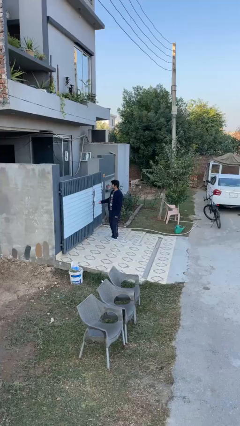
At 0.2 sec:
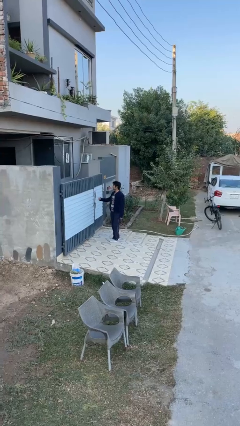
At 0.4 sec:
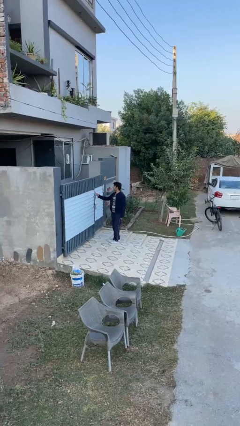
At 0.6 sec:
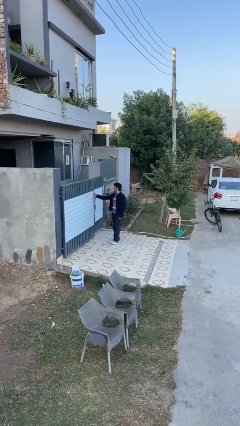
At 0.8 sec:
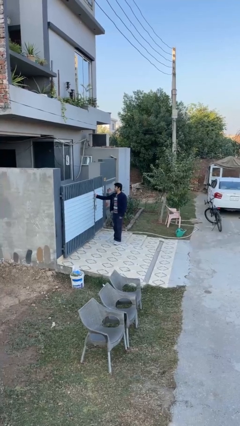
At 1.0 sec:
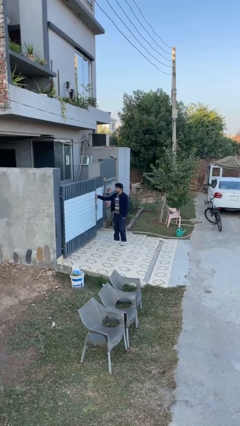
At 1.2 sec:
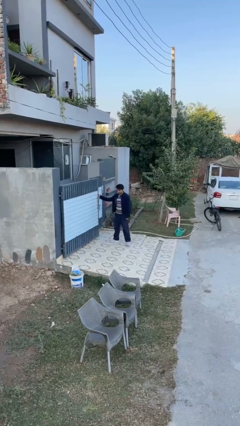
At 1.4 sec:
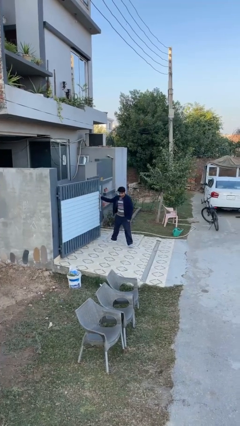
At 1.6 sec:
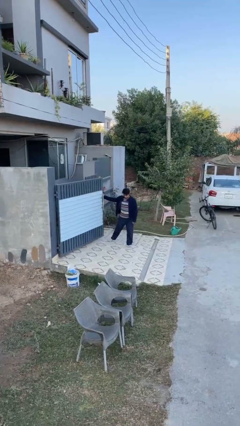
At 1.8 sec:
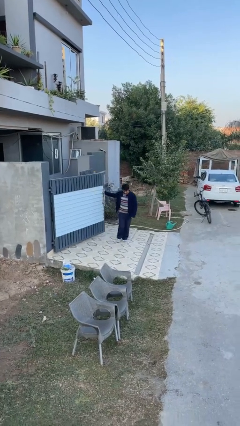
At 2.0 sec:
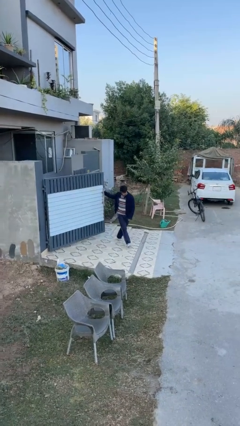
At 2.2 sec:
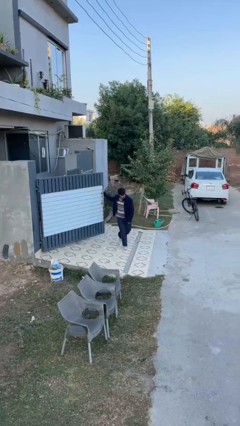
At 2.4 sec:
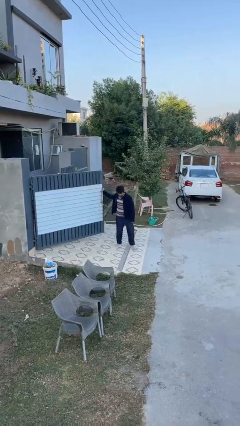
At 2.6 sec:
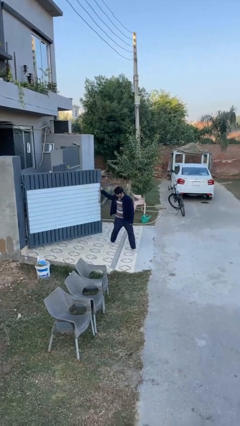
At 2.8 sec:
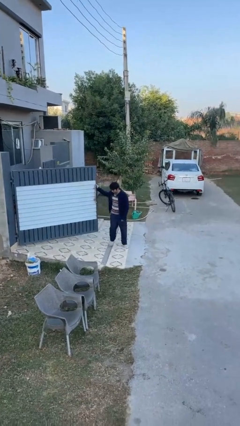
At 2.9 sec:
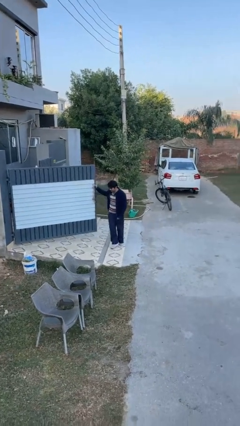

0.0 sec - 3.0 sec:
person opens facility door

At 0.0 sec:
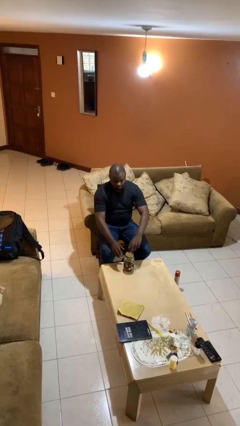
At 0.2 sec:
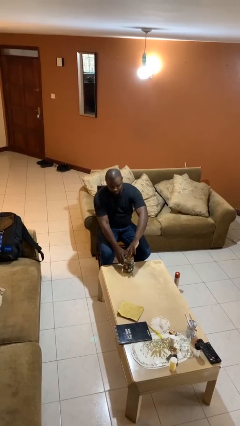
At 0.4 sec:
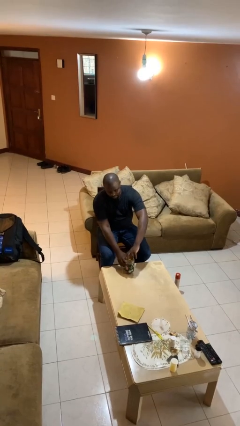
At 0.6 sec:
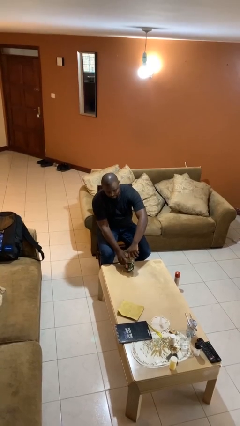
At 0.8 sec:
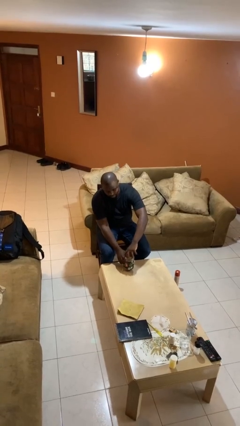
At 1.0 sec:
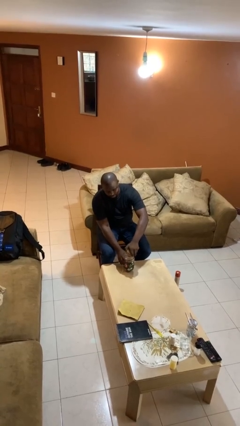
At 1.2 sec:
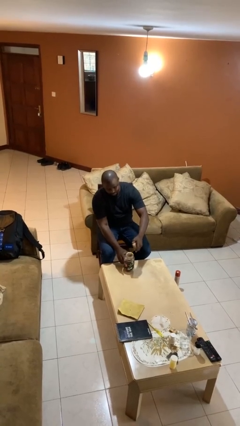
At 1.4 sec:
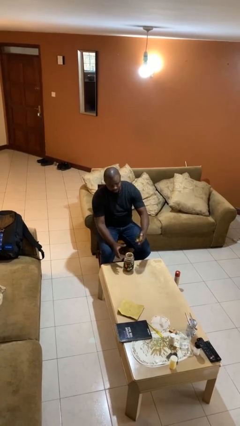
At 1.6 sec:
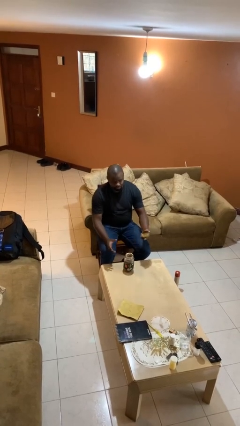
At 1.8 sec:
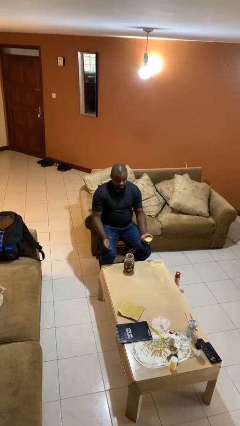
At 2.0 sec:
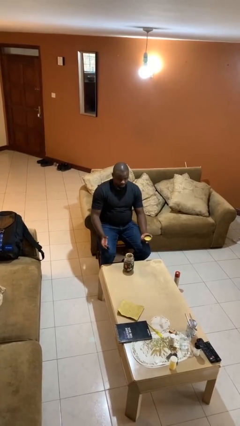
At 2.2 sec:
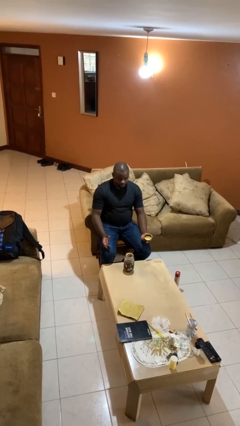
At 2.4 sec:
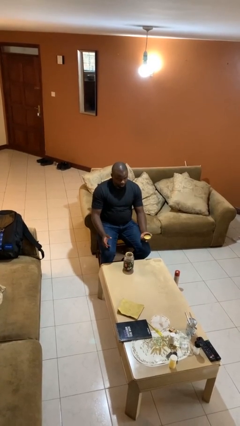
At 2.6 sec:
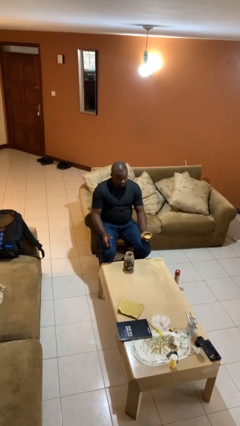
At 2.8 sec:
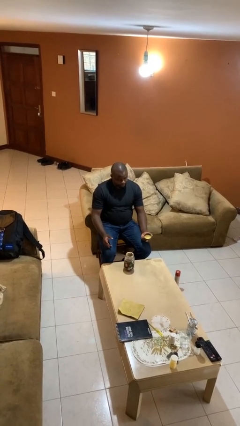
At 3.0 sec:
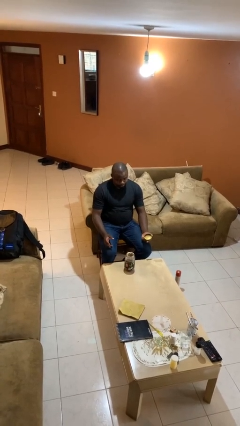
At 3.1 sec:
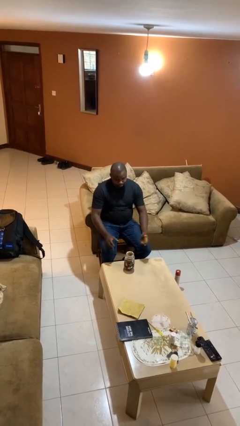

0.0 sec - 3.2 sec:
person opens jar

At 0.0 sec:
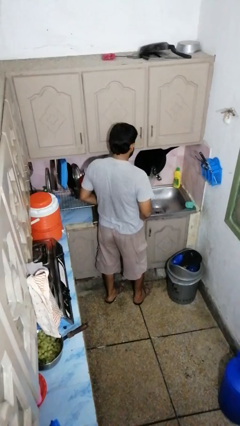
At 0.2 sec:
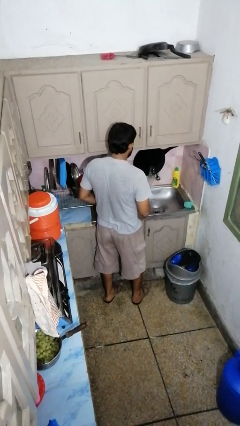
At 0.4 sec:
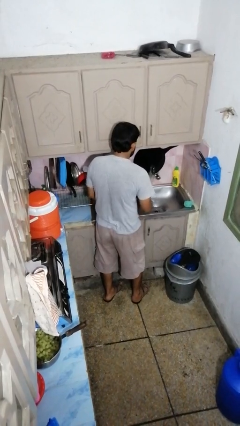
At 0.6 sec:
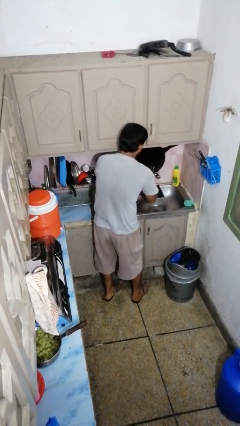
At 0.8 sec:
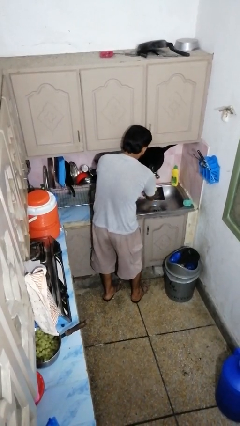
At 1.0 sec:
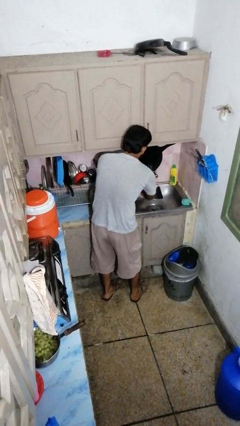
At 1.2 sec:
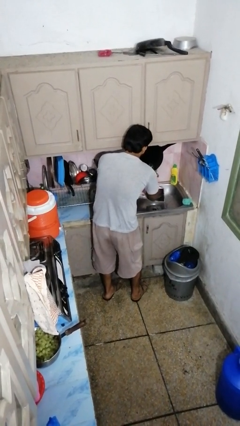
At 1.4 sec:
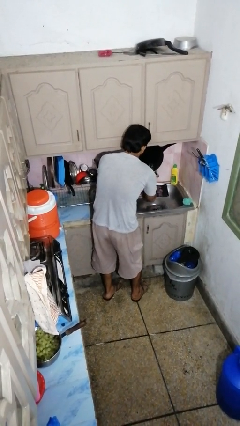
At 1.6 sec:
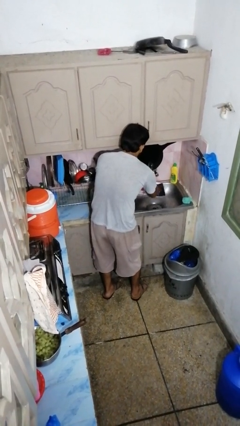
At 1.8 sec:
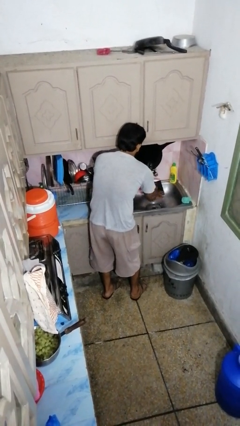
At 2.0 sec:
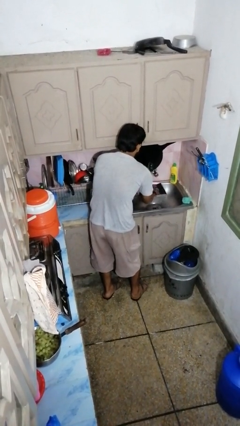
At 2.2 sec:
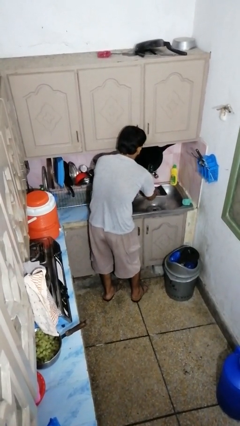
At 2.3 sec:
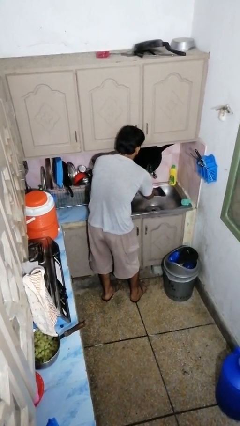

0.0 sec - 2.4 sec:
person washes dish

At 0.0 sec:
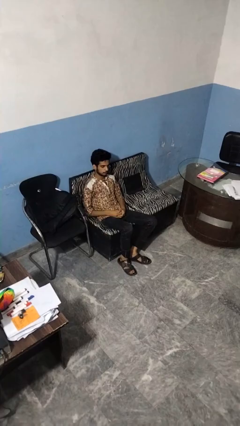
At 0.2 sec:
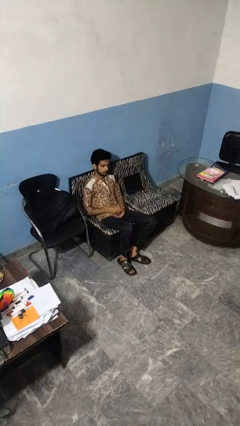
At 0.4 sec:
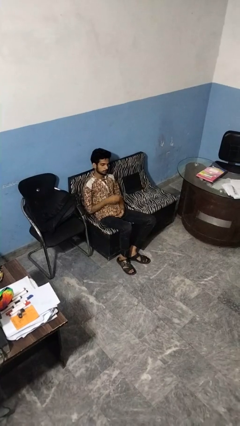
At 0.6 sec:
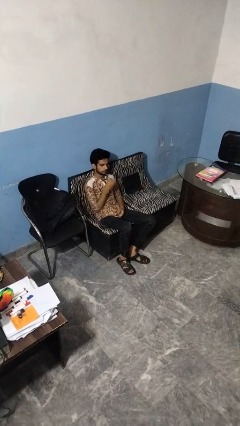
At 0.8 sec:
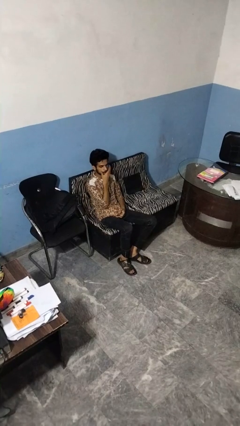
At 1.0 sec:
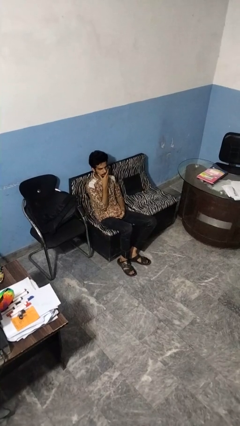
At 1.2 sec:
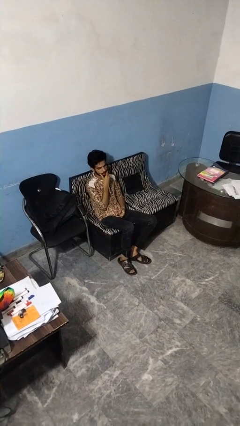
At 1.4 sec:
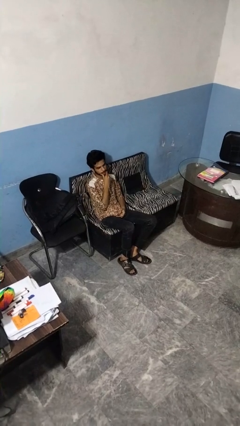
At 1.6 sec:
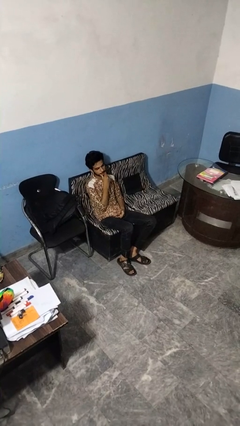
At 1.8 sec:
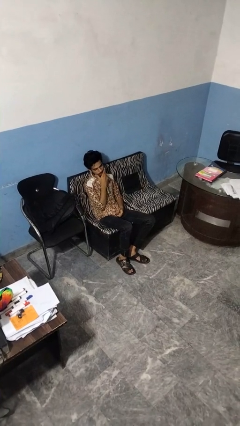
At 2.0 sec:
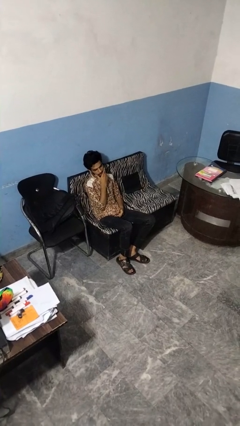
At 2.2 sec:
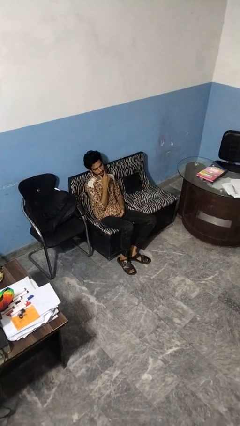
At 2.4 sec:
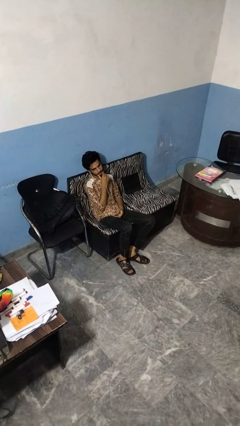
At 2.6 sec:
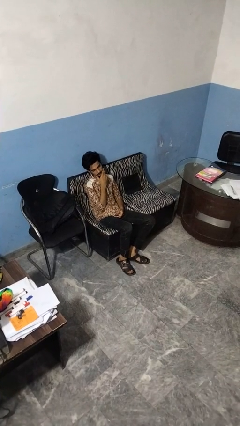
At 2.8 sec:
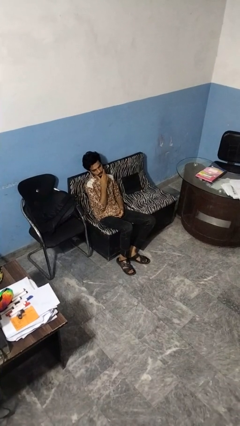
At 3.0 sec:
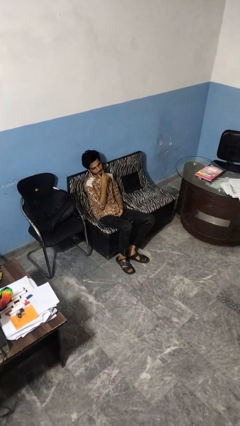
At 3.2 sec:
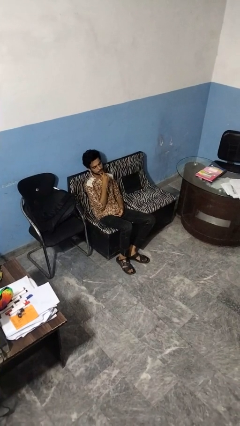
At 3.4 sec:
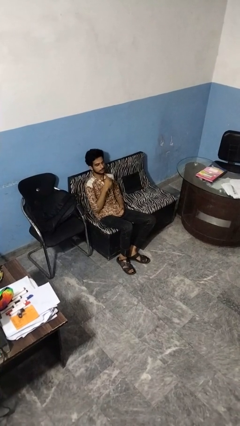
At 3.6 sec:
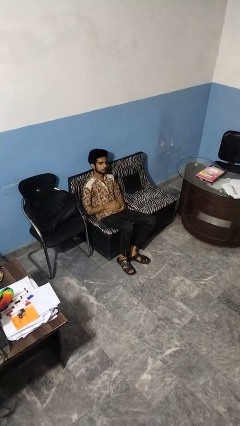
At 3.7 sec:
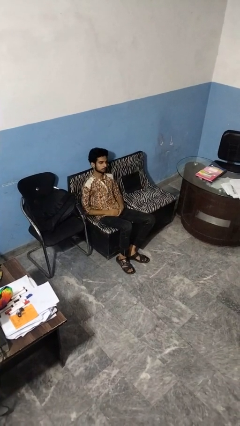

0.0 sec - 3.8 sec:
person strokes chin

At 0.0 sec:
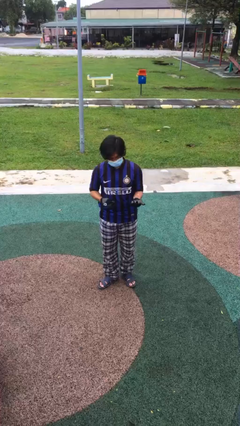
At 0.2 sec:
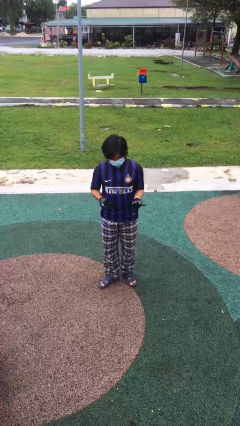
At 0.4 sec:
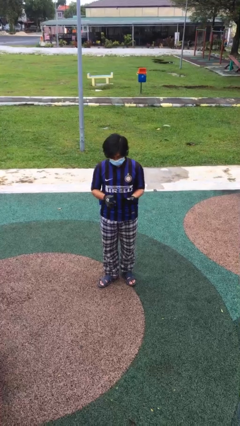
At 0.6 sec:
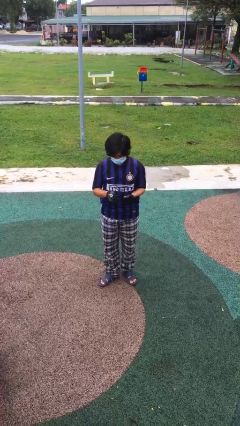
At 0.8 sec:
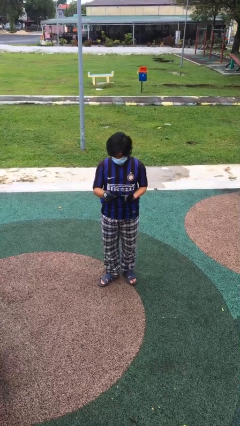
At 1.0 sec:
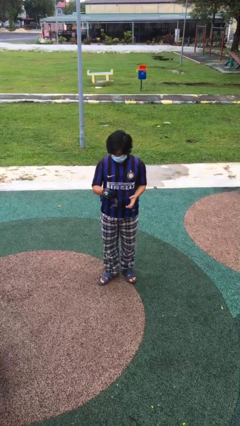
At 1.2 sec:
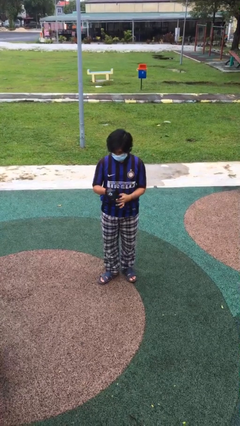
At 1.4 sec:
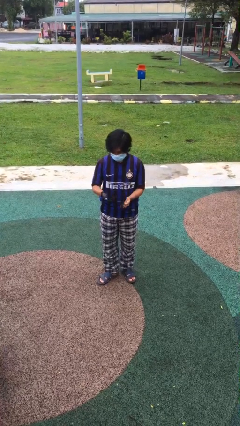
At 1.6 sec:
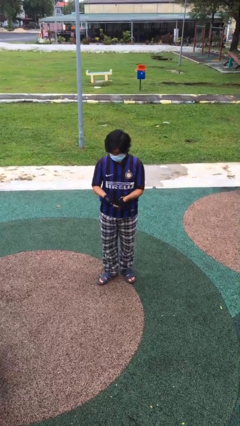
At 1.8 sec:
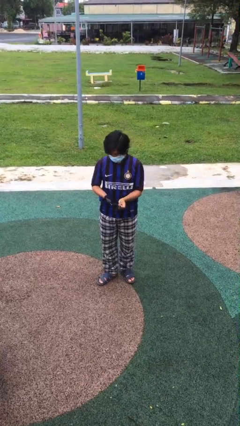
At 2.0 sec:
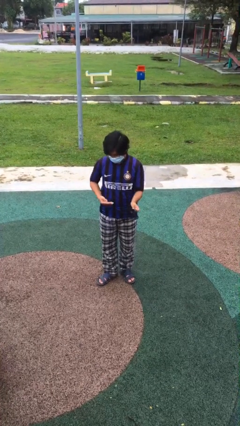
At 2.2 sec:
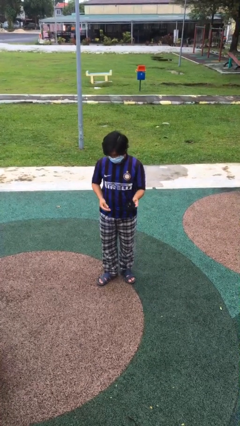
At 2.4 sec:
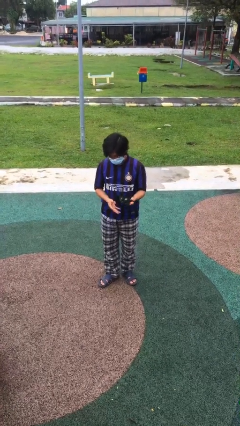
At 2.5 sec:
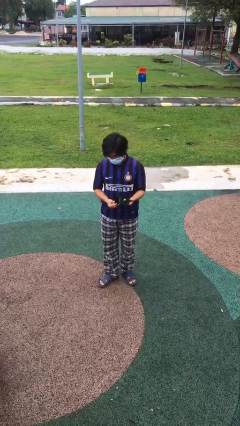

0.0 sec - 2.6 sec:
person takes off gloves

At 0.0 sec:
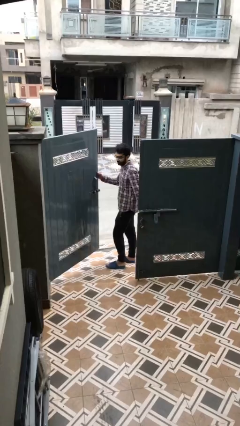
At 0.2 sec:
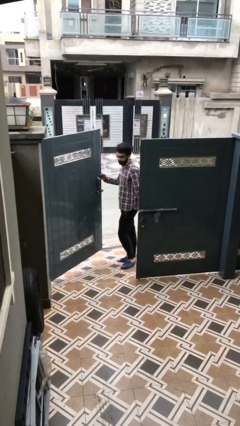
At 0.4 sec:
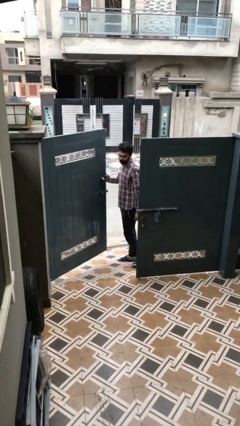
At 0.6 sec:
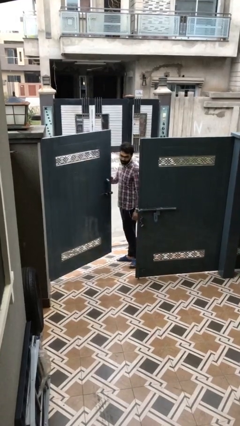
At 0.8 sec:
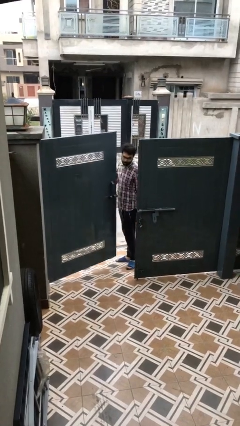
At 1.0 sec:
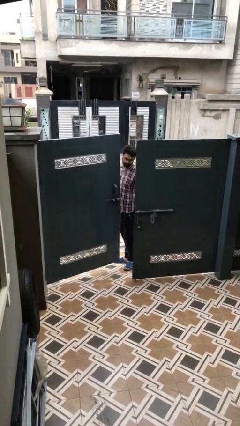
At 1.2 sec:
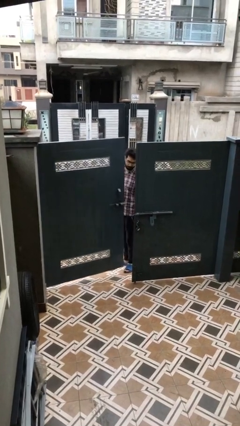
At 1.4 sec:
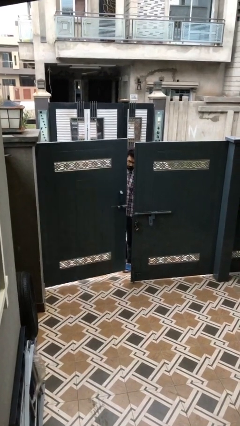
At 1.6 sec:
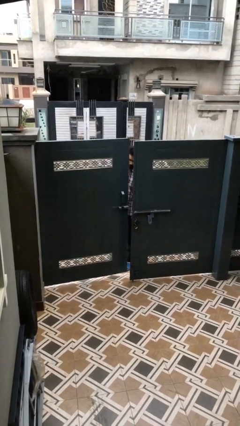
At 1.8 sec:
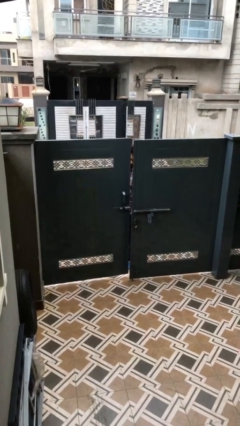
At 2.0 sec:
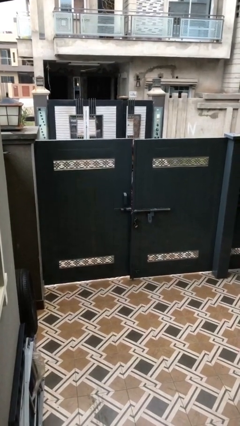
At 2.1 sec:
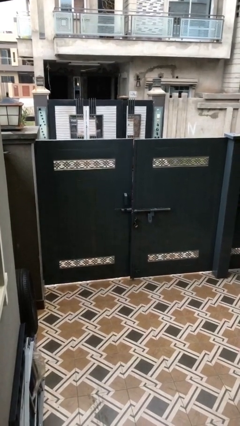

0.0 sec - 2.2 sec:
person closes facility door
